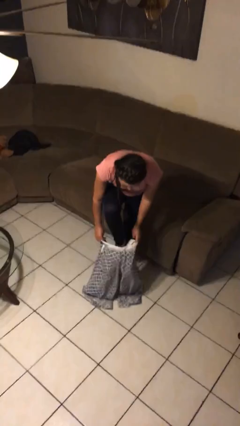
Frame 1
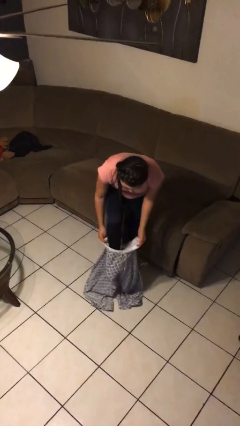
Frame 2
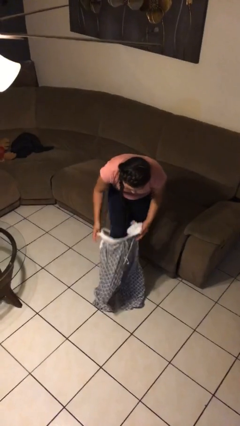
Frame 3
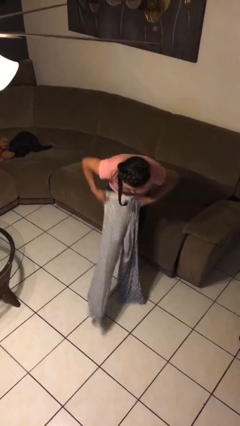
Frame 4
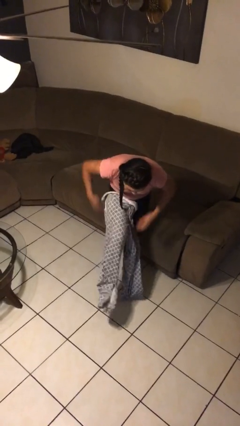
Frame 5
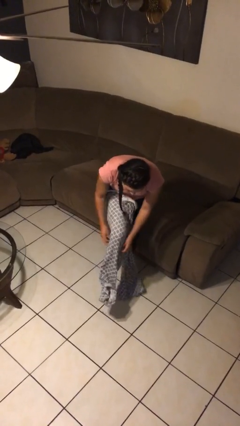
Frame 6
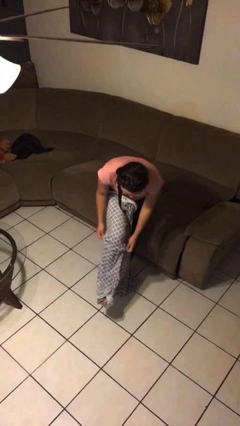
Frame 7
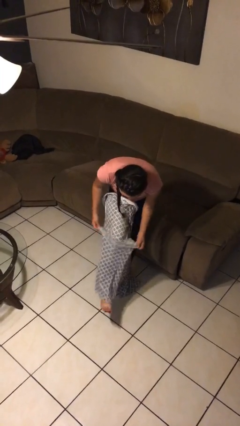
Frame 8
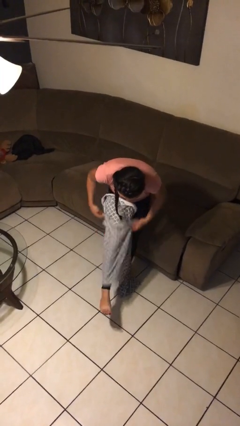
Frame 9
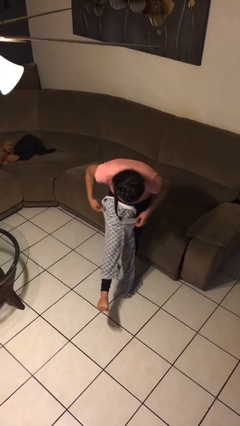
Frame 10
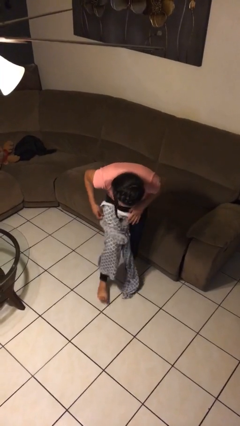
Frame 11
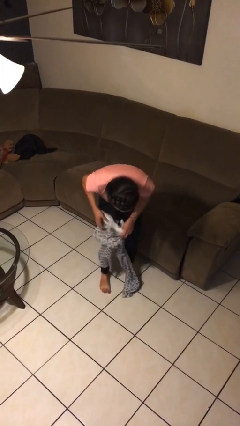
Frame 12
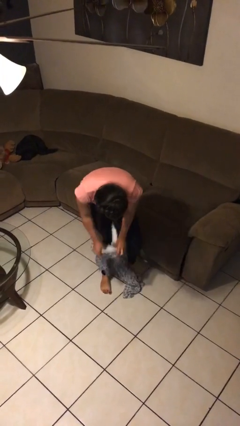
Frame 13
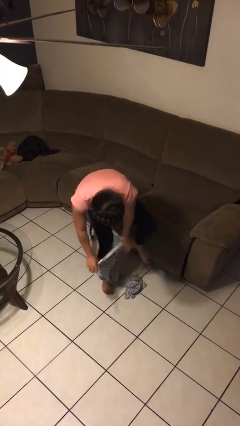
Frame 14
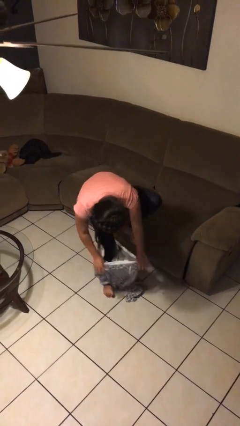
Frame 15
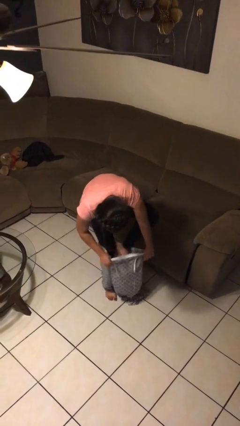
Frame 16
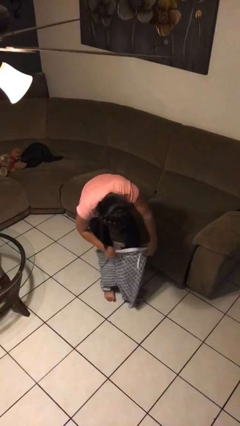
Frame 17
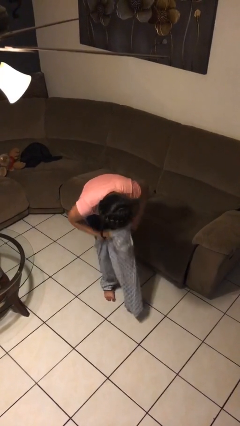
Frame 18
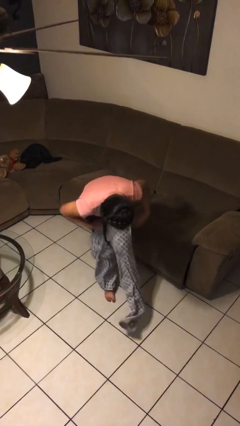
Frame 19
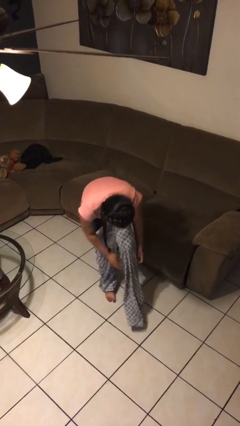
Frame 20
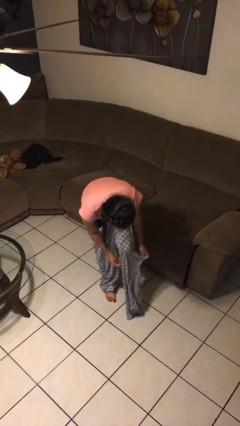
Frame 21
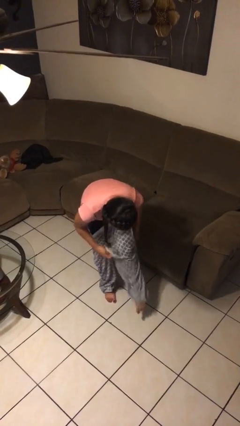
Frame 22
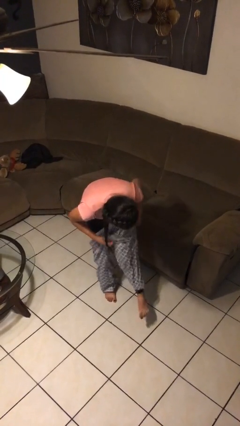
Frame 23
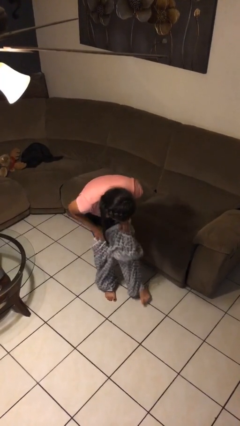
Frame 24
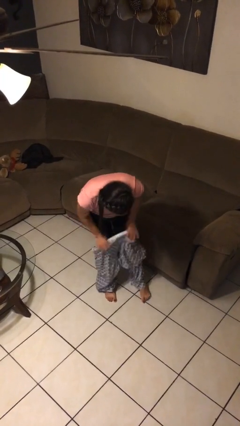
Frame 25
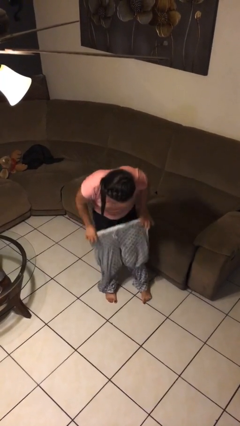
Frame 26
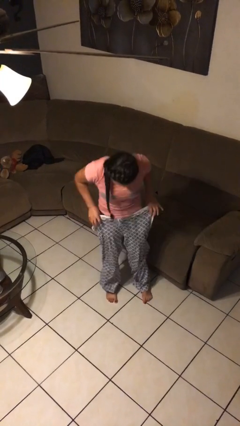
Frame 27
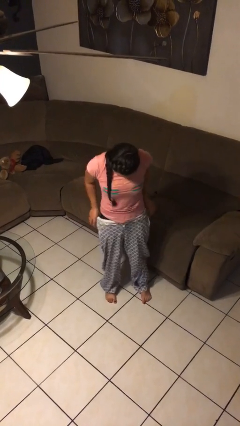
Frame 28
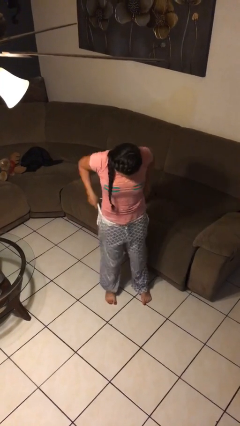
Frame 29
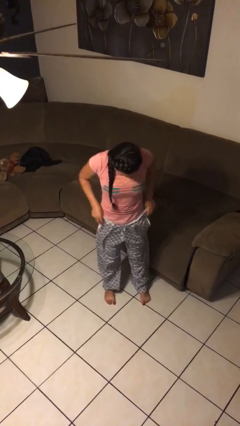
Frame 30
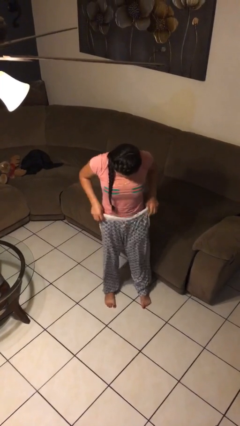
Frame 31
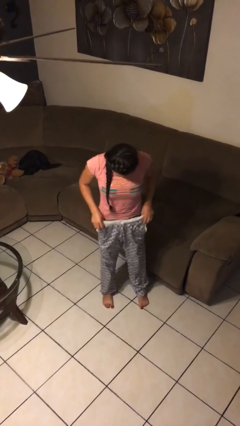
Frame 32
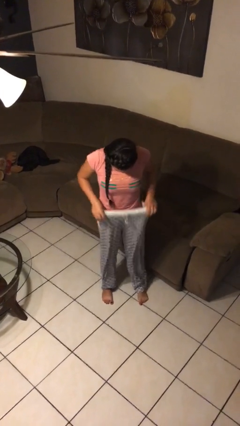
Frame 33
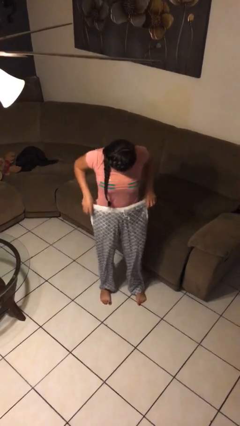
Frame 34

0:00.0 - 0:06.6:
person takes off pants

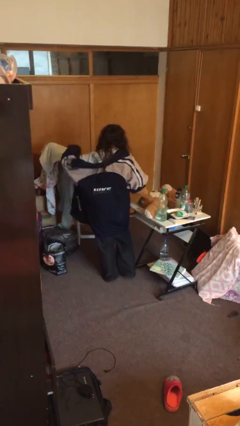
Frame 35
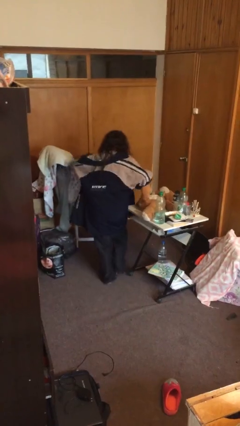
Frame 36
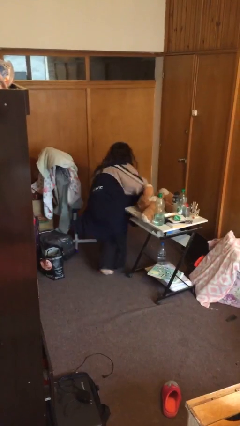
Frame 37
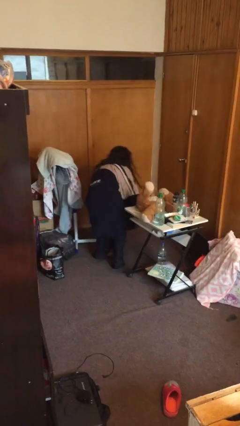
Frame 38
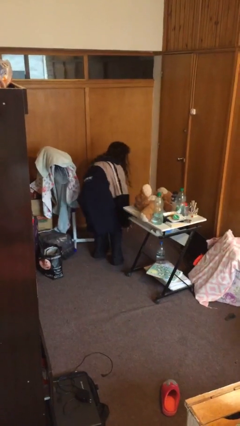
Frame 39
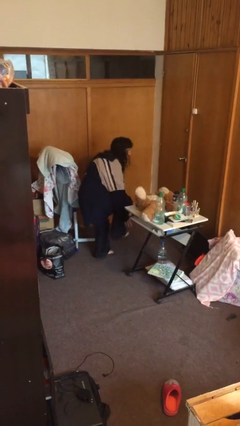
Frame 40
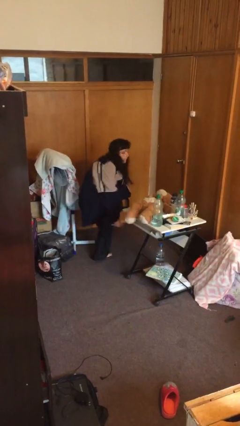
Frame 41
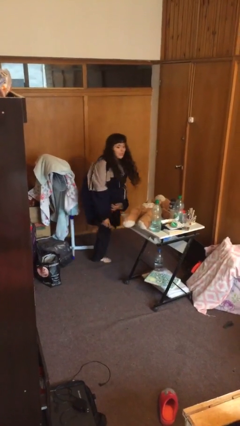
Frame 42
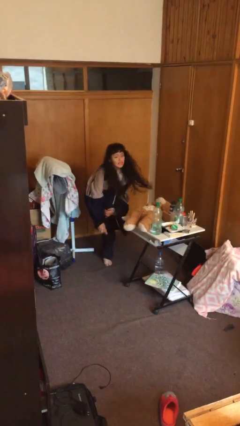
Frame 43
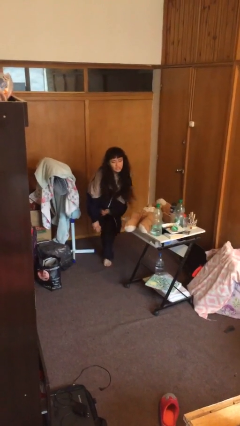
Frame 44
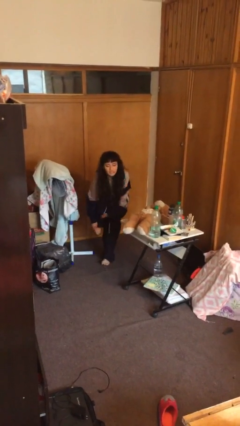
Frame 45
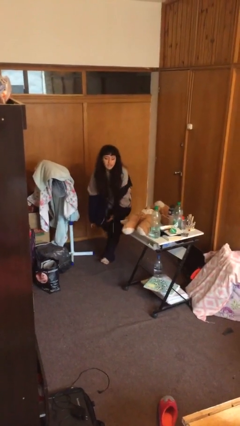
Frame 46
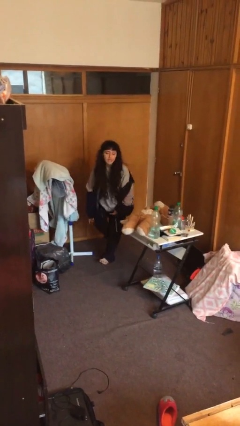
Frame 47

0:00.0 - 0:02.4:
person stubs toe

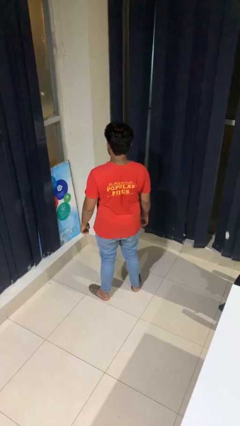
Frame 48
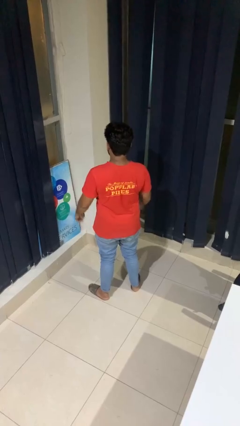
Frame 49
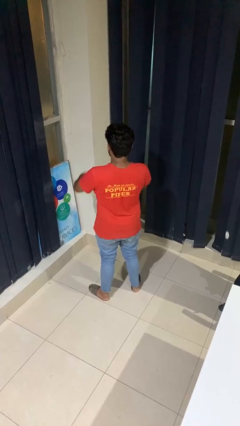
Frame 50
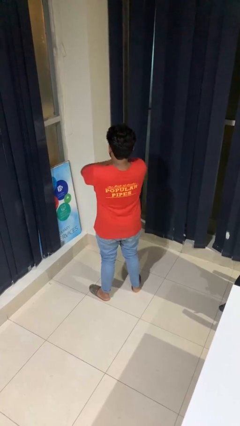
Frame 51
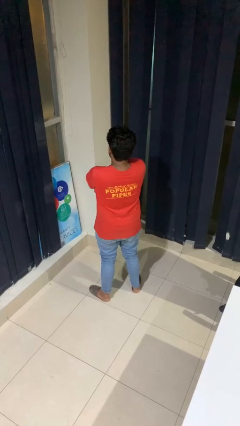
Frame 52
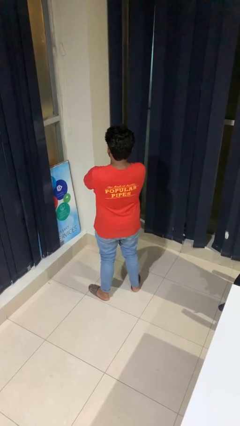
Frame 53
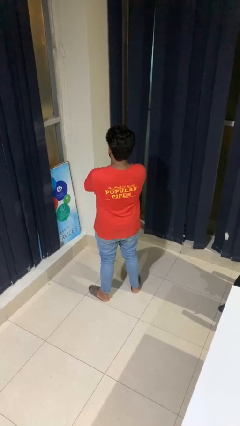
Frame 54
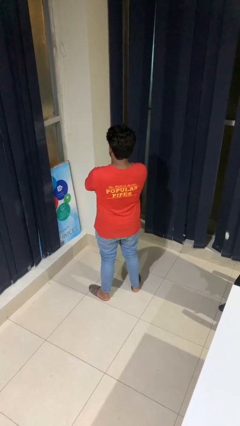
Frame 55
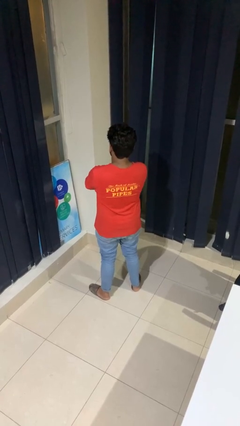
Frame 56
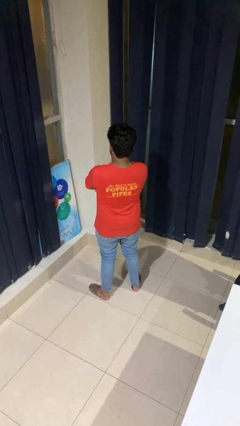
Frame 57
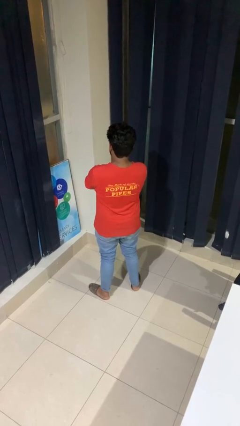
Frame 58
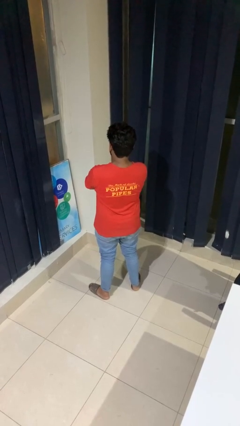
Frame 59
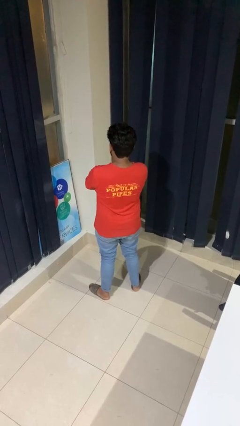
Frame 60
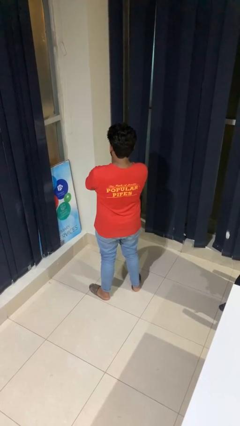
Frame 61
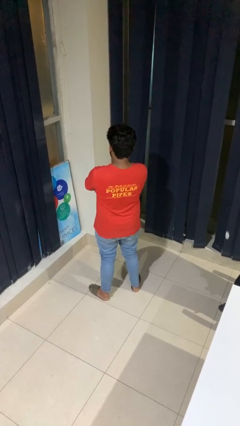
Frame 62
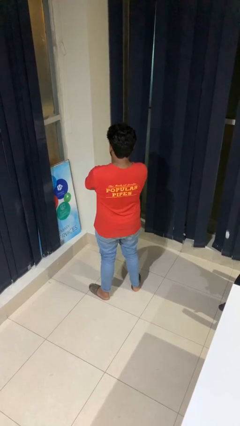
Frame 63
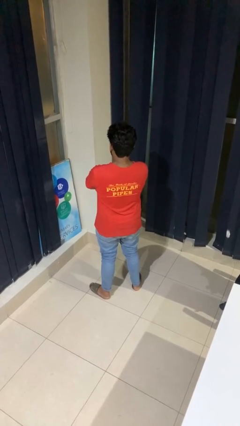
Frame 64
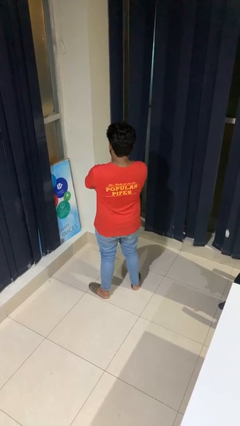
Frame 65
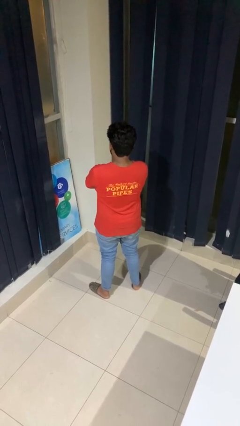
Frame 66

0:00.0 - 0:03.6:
person crosses arms

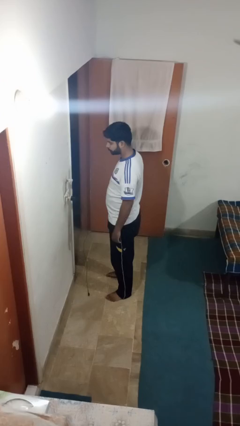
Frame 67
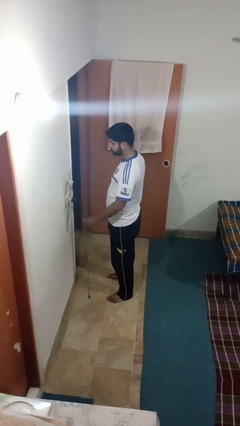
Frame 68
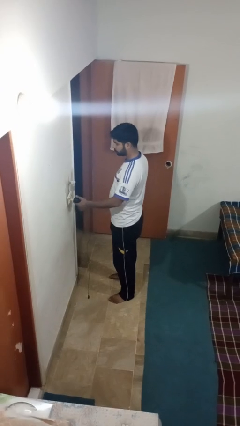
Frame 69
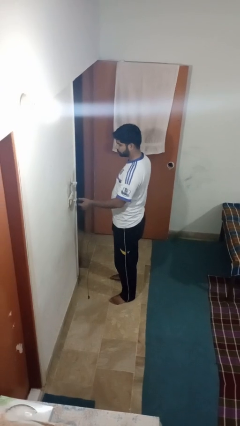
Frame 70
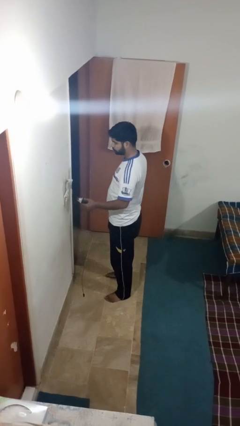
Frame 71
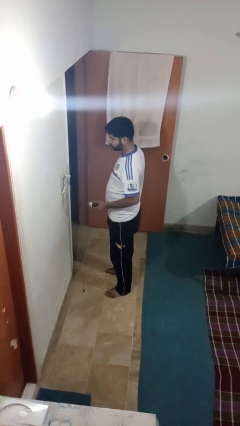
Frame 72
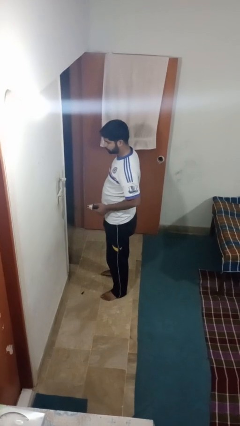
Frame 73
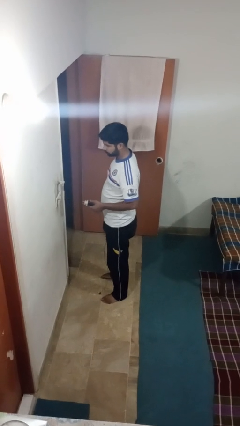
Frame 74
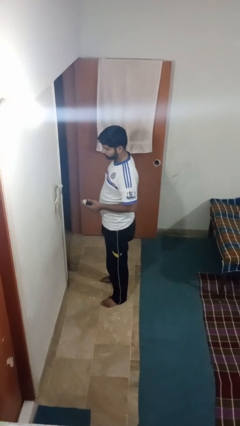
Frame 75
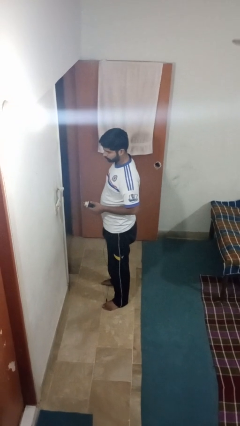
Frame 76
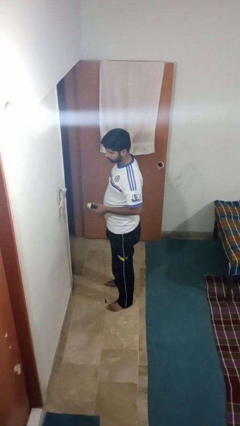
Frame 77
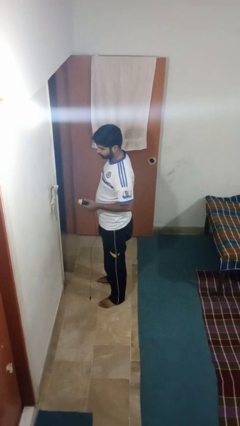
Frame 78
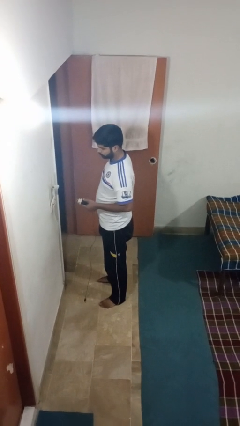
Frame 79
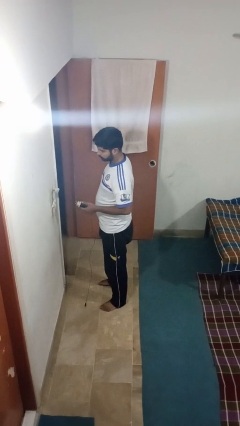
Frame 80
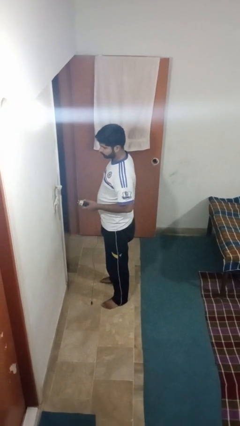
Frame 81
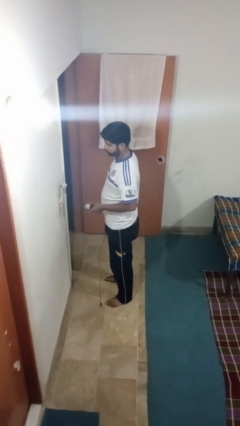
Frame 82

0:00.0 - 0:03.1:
person unplugs from electrical socket

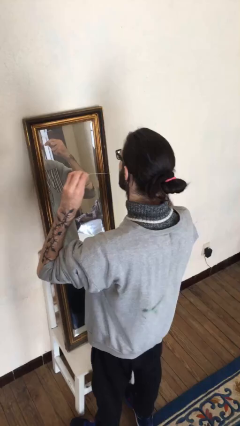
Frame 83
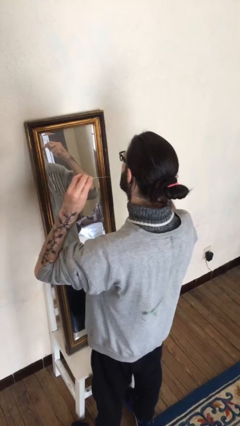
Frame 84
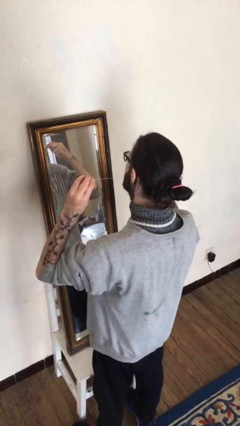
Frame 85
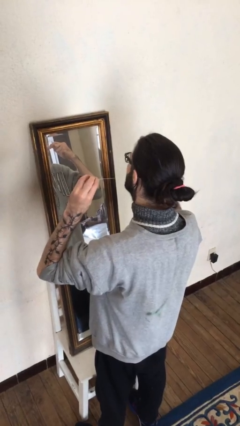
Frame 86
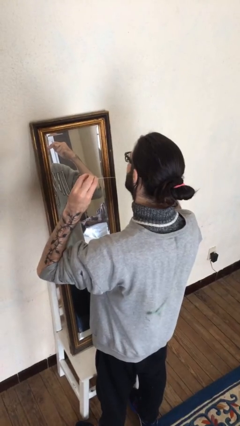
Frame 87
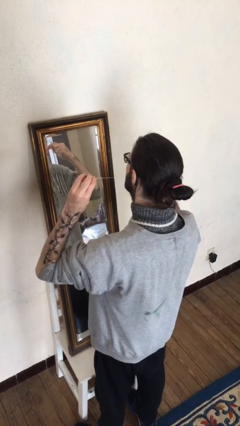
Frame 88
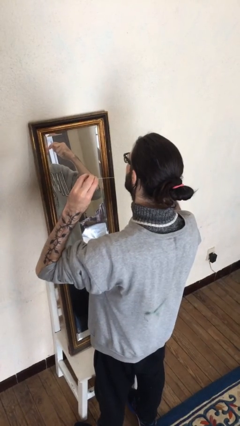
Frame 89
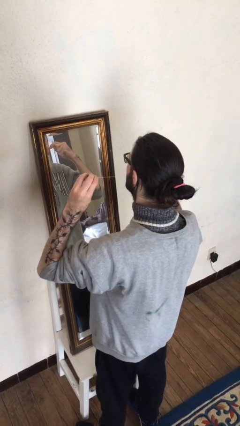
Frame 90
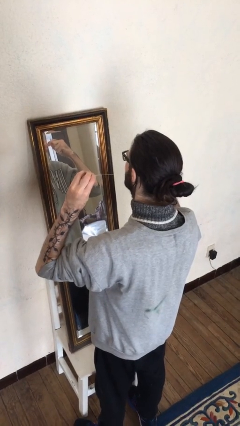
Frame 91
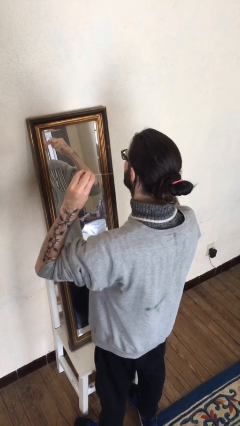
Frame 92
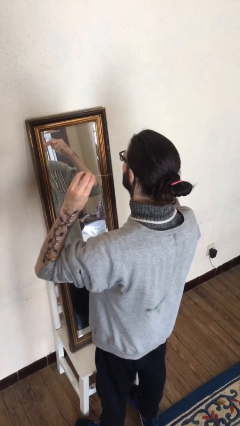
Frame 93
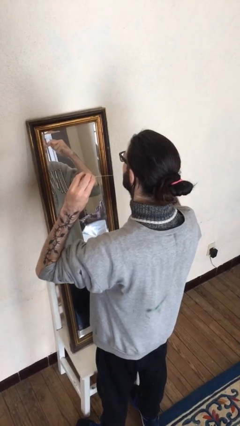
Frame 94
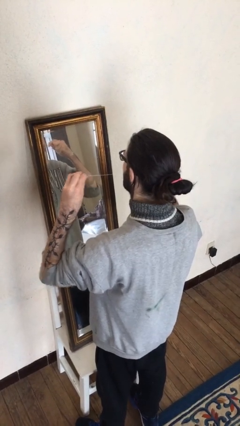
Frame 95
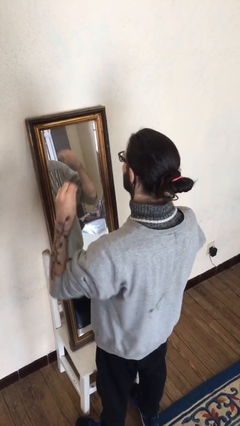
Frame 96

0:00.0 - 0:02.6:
person flosses
